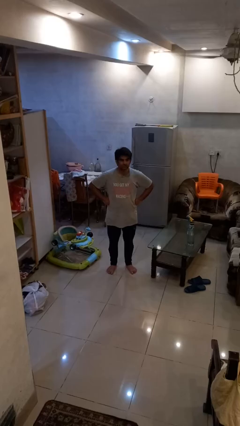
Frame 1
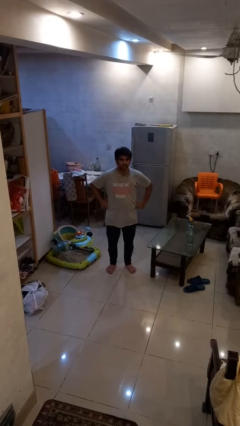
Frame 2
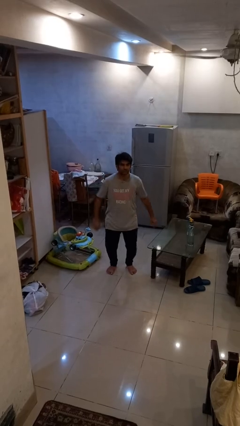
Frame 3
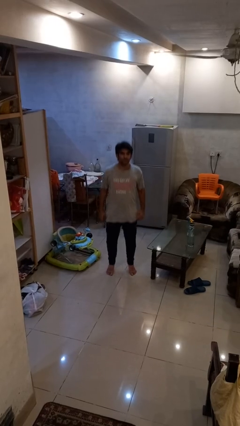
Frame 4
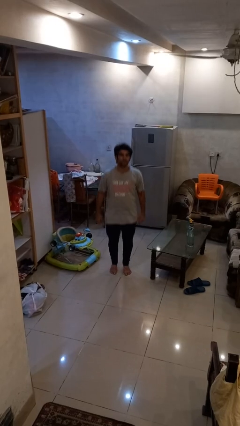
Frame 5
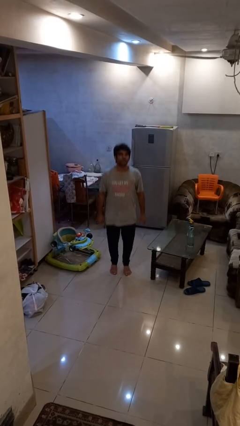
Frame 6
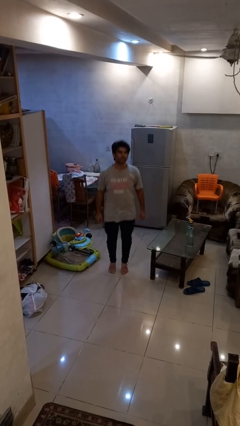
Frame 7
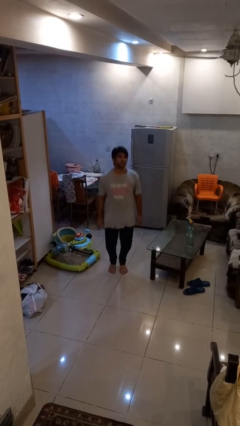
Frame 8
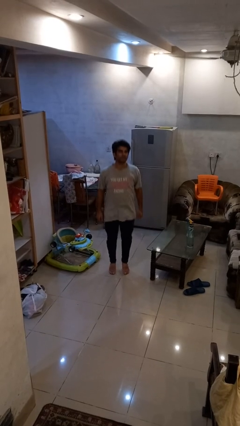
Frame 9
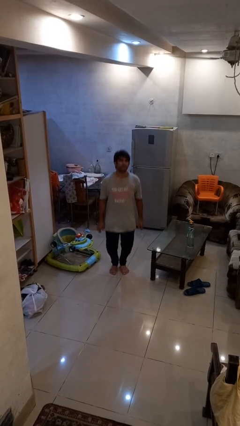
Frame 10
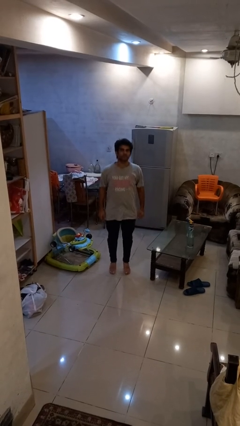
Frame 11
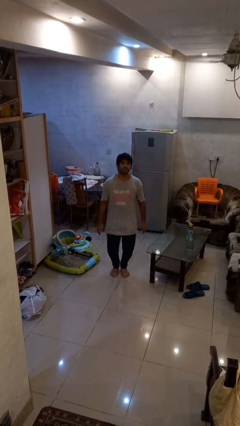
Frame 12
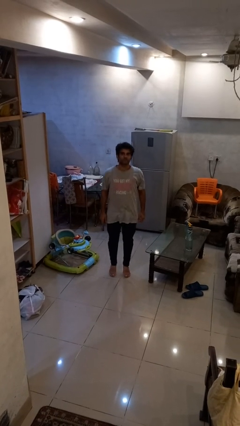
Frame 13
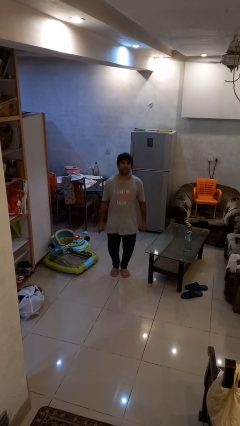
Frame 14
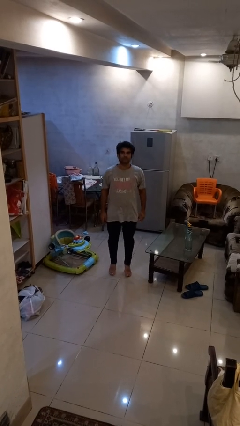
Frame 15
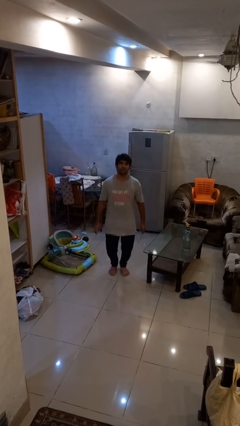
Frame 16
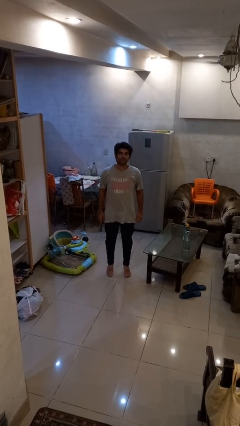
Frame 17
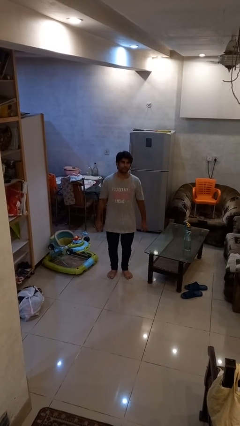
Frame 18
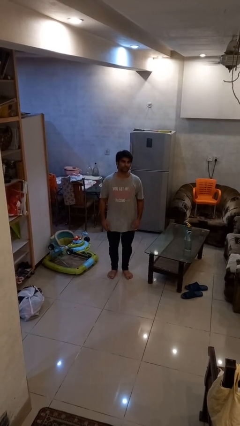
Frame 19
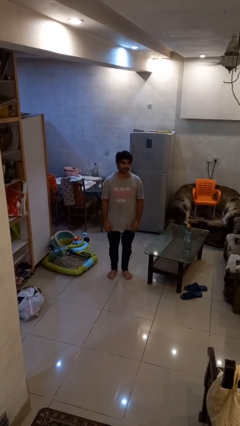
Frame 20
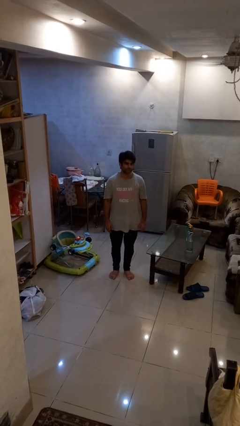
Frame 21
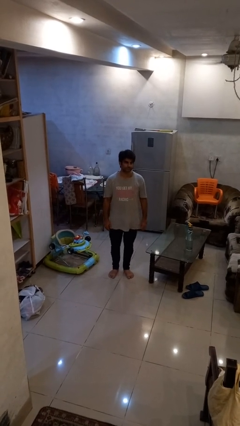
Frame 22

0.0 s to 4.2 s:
person jumps

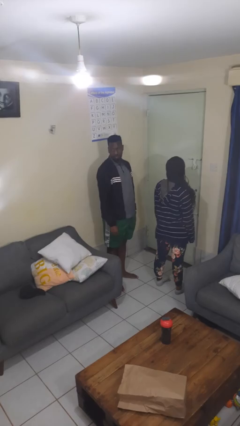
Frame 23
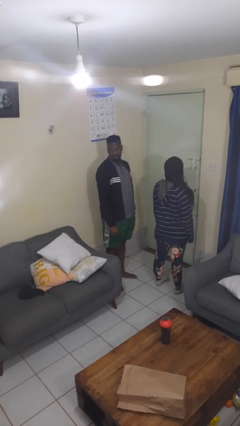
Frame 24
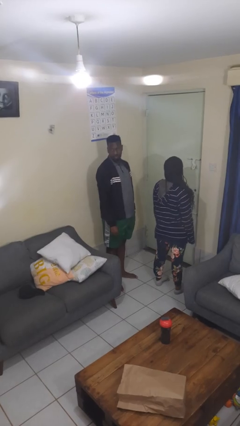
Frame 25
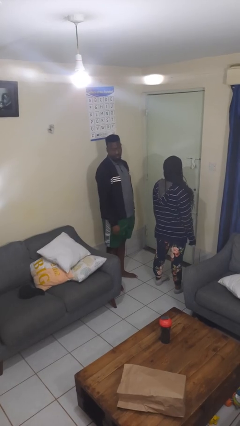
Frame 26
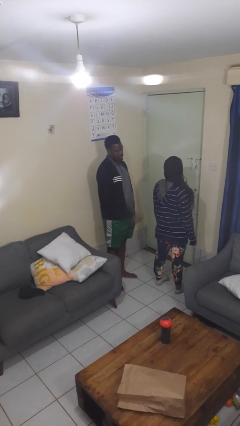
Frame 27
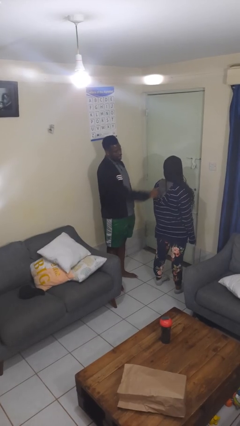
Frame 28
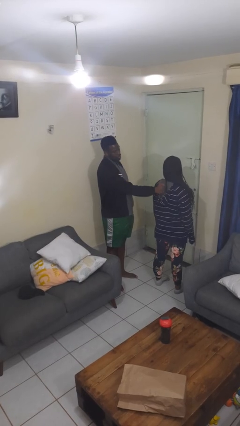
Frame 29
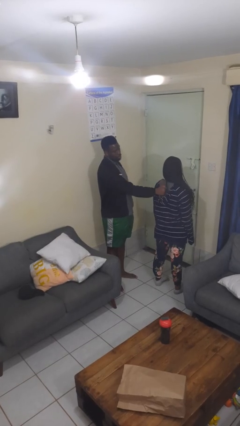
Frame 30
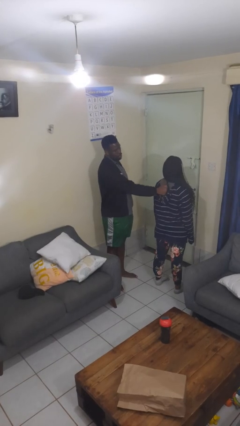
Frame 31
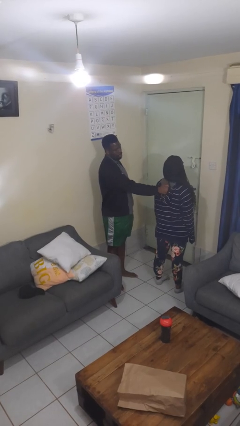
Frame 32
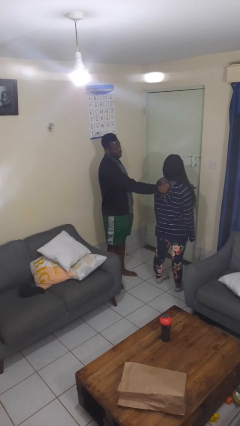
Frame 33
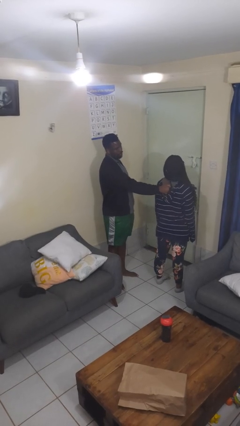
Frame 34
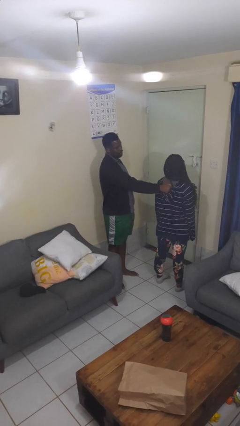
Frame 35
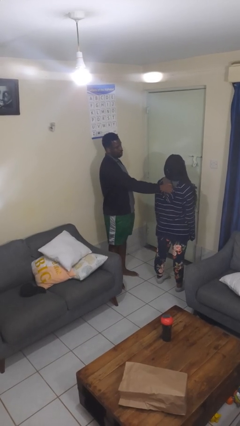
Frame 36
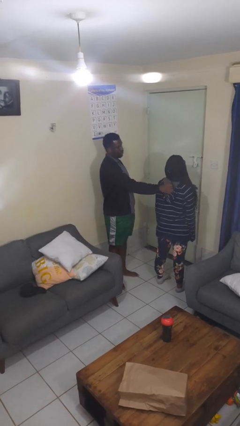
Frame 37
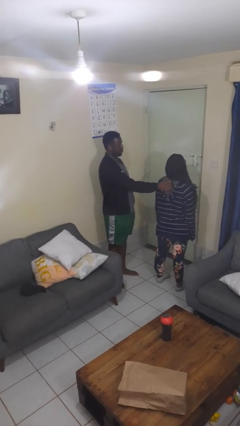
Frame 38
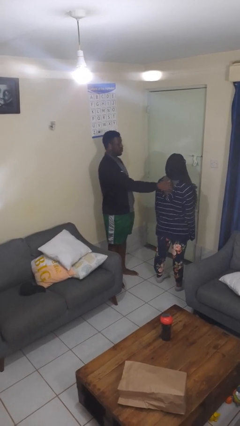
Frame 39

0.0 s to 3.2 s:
person touches back of person

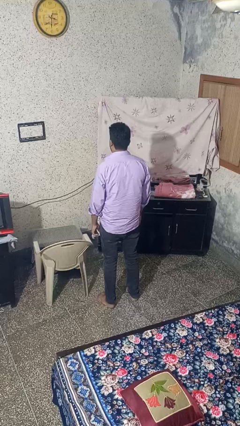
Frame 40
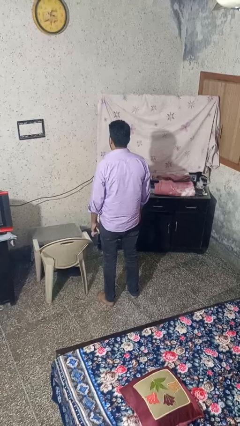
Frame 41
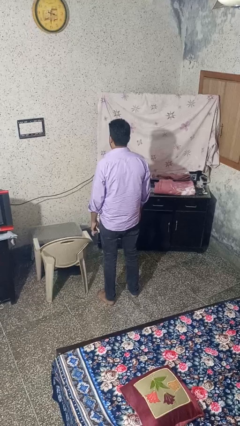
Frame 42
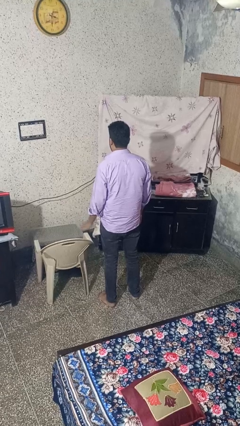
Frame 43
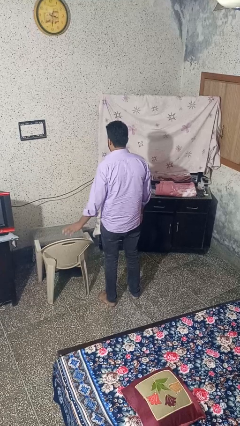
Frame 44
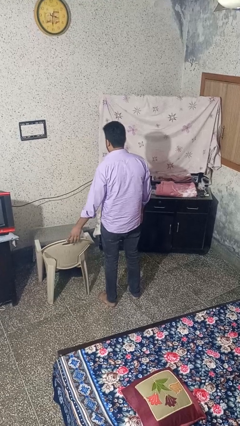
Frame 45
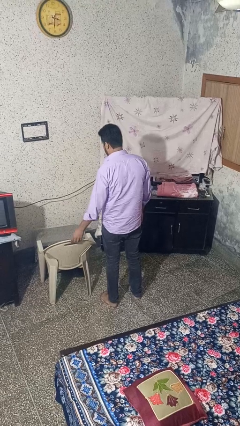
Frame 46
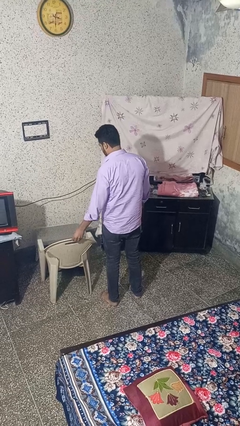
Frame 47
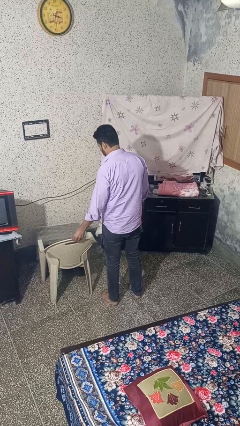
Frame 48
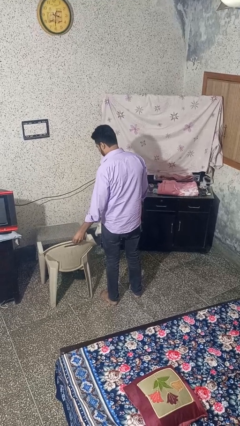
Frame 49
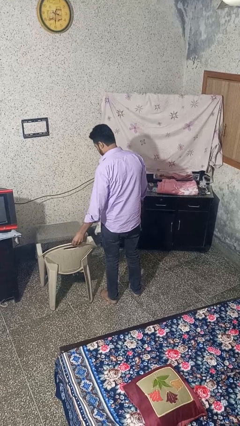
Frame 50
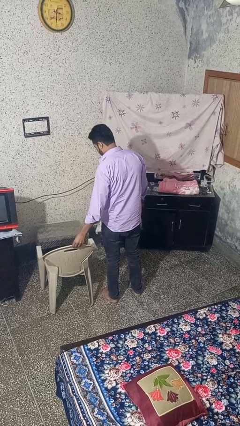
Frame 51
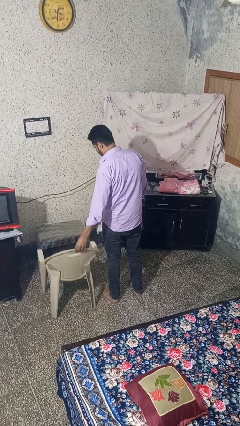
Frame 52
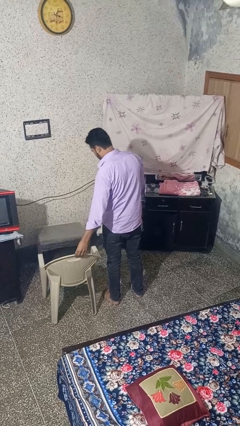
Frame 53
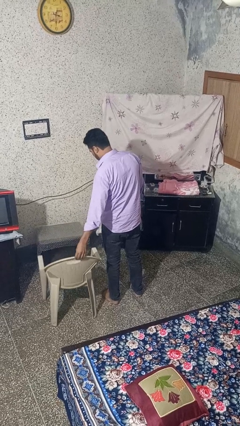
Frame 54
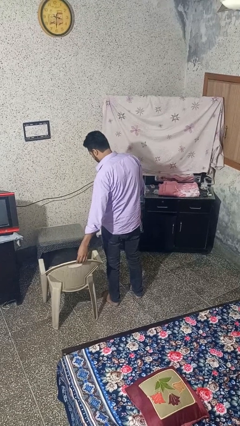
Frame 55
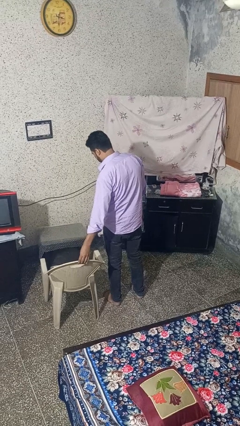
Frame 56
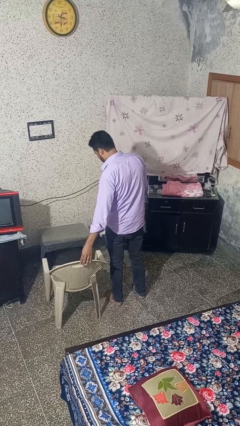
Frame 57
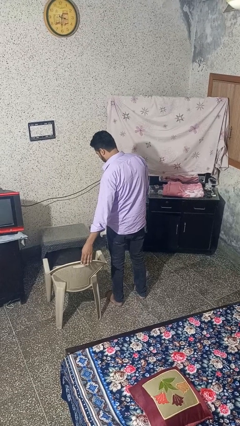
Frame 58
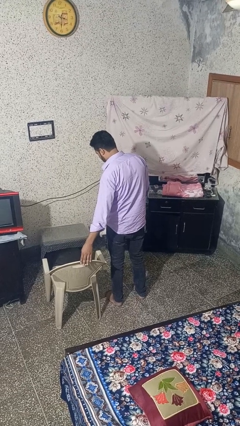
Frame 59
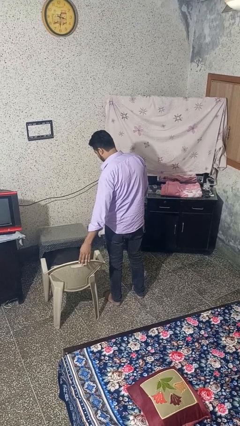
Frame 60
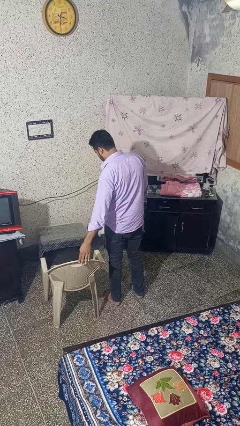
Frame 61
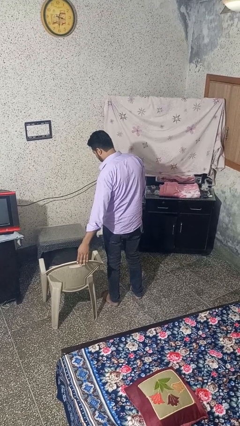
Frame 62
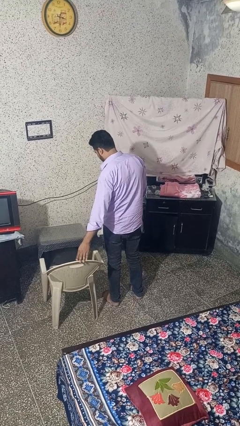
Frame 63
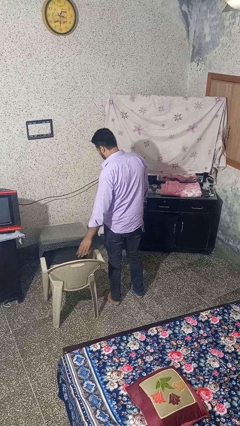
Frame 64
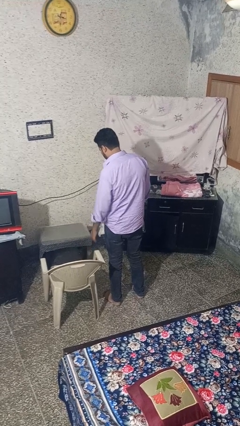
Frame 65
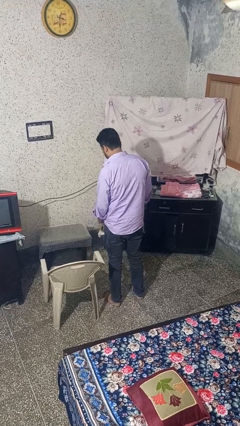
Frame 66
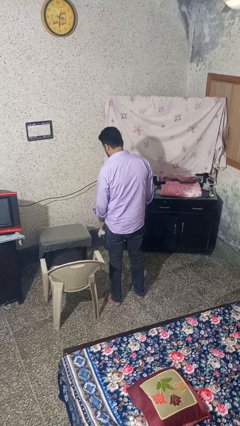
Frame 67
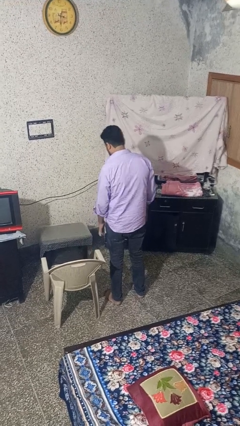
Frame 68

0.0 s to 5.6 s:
person pulls out chair

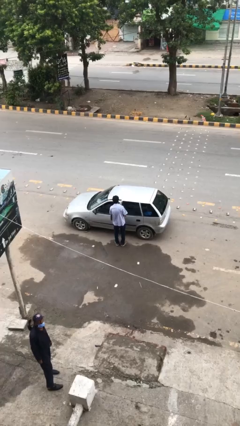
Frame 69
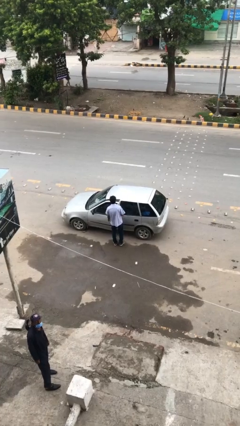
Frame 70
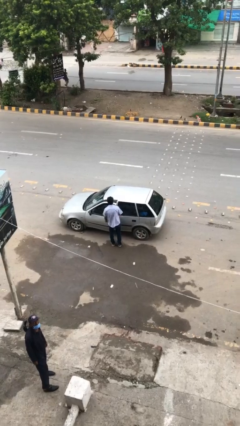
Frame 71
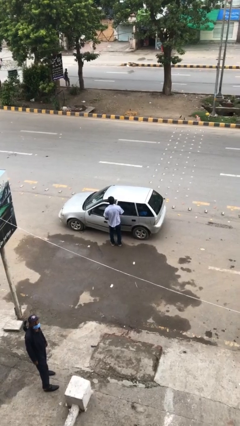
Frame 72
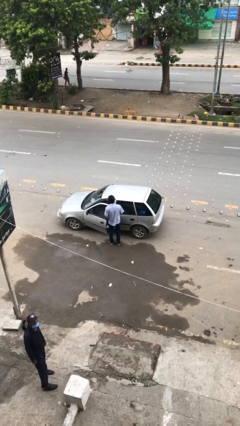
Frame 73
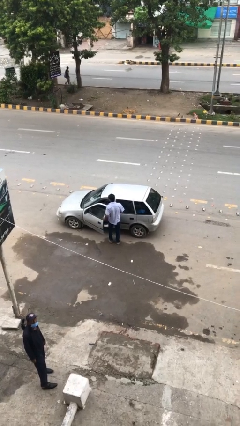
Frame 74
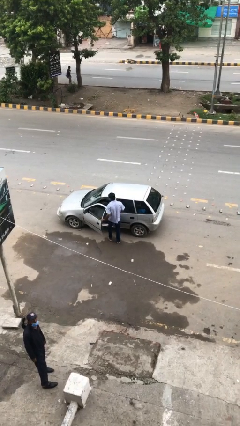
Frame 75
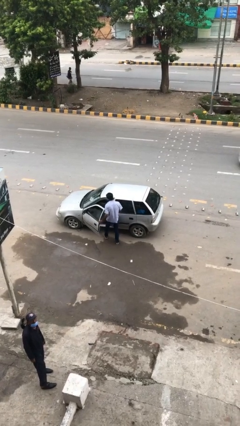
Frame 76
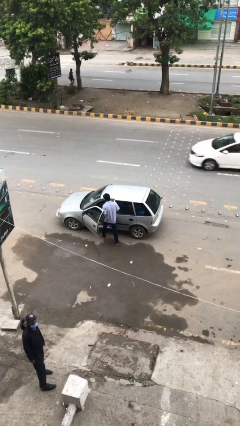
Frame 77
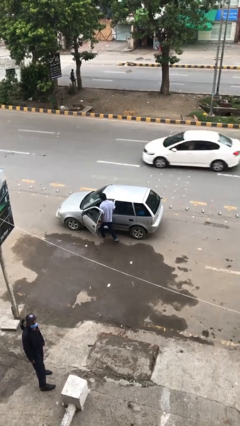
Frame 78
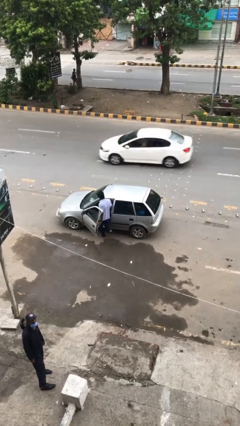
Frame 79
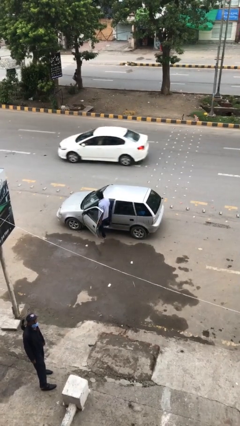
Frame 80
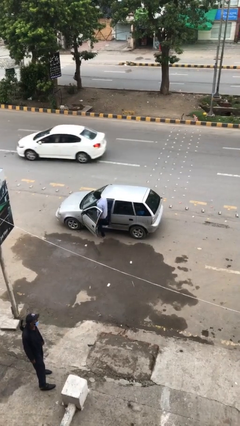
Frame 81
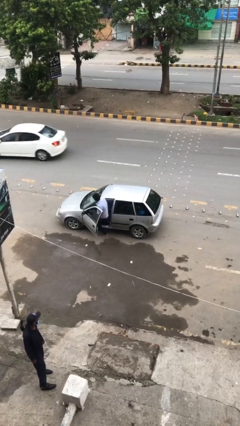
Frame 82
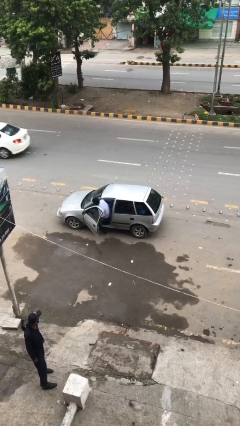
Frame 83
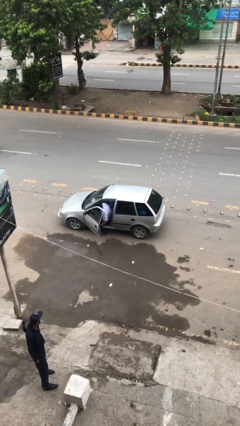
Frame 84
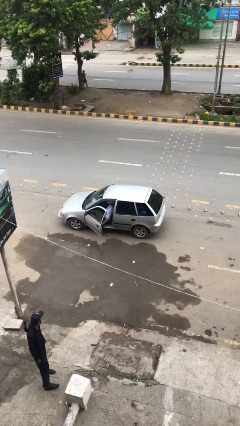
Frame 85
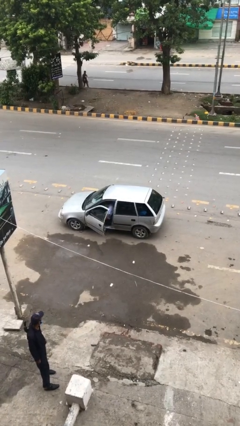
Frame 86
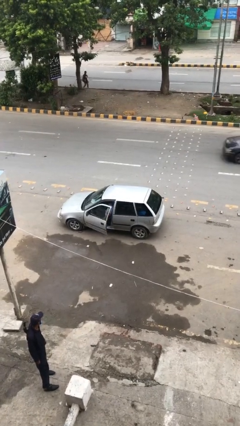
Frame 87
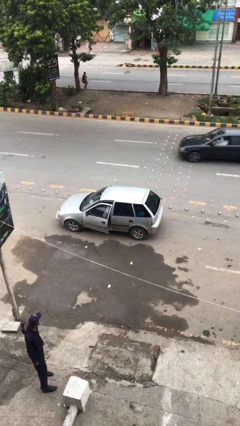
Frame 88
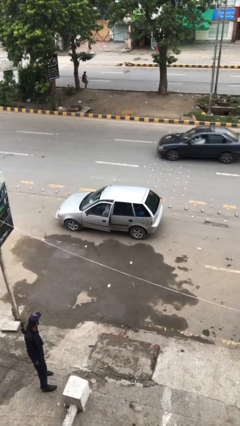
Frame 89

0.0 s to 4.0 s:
car picks up person

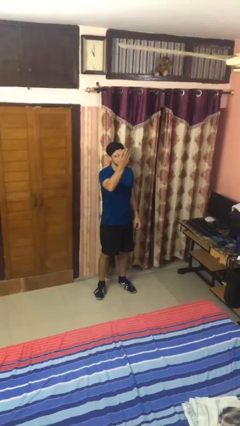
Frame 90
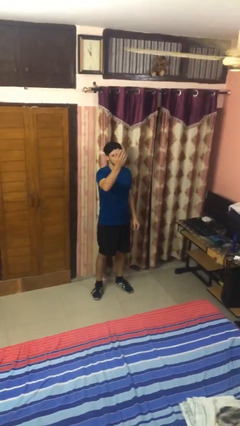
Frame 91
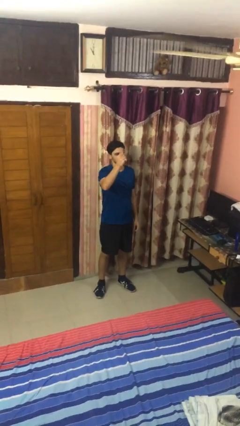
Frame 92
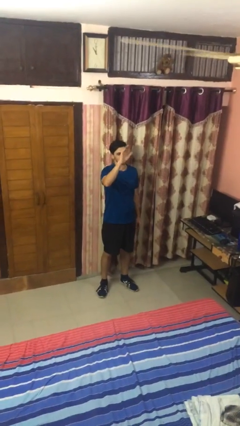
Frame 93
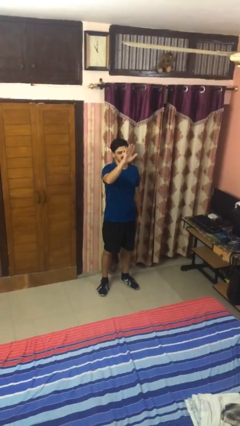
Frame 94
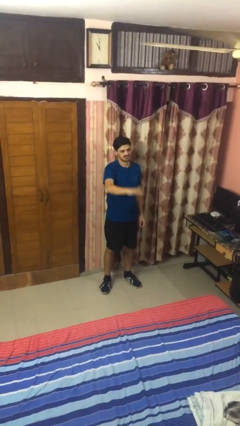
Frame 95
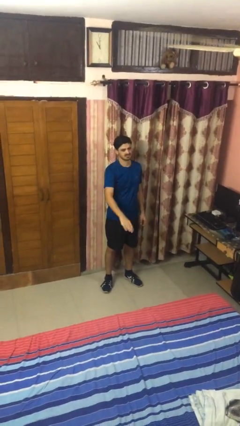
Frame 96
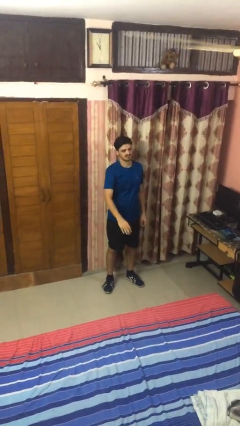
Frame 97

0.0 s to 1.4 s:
person gestures swipe down
